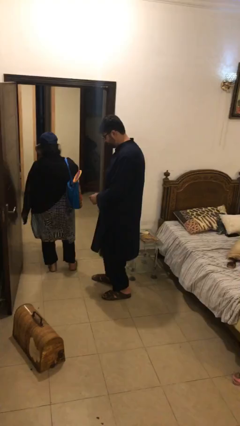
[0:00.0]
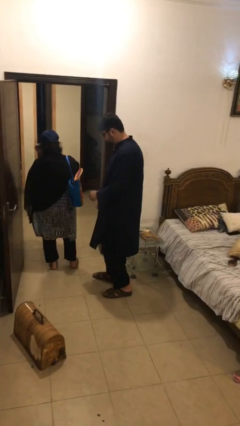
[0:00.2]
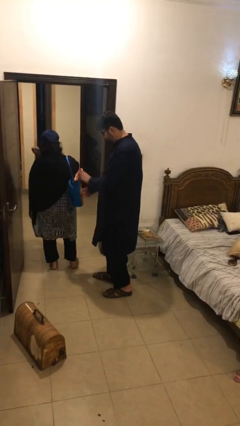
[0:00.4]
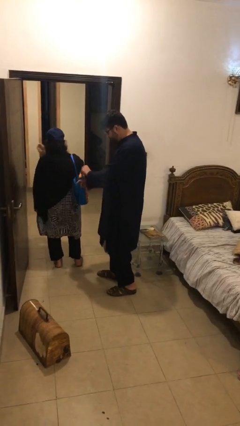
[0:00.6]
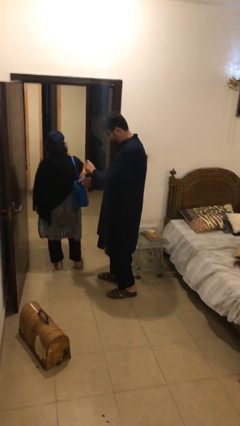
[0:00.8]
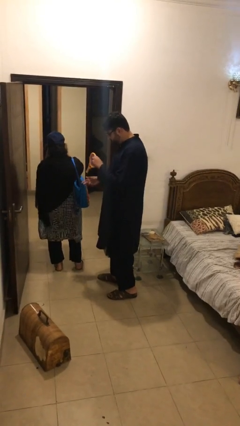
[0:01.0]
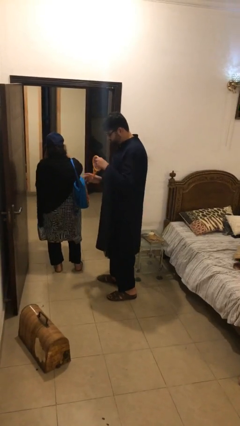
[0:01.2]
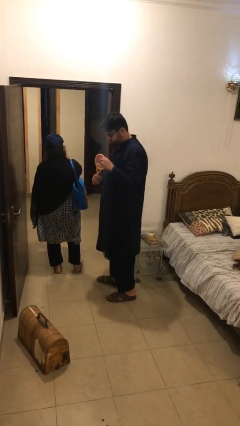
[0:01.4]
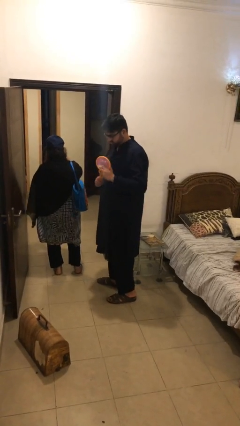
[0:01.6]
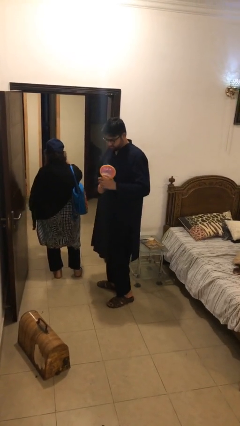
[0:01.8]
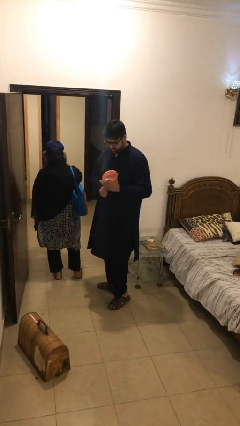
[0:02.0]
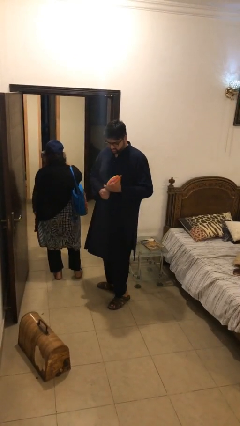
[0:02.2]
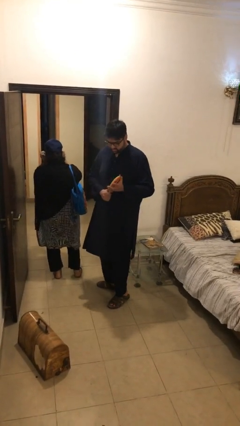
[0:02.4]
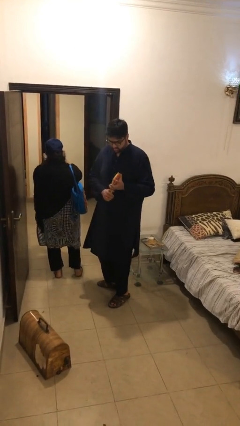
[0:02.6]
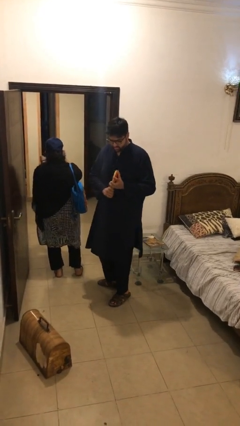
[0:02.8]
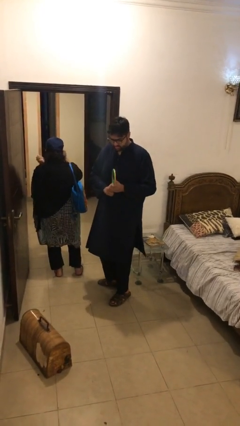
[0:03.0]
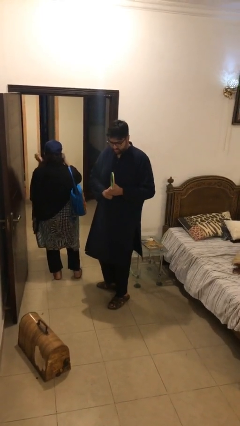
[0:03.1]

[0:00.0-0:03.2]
person steals object from person

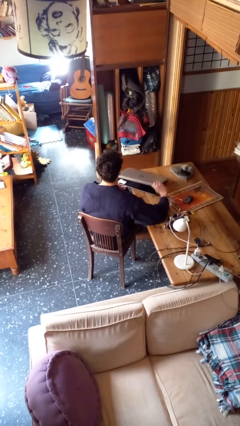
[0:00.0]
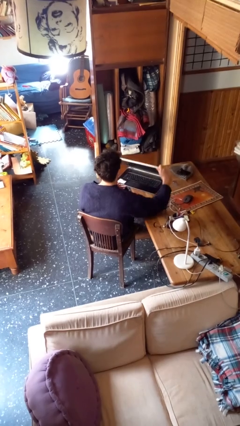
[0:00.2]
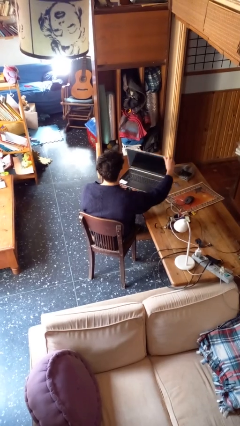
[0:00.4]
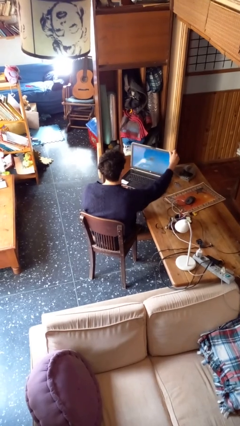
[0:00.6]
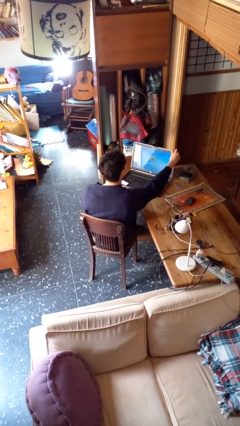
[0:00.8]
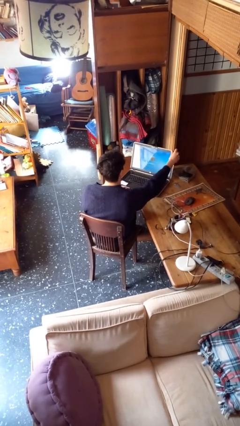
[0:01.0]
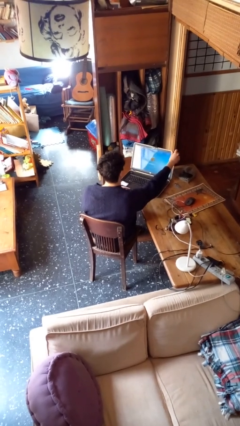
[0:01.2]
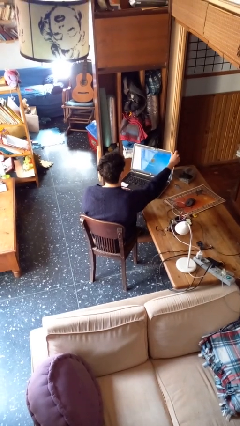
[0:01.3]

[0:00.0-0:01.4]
person opens laptop

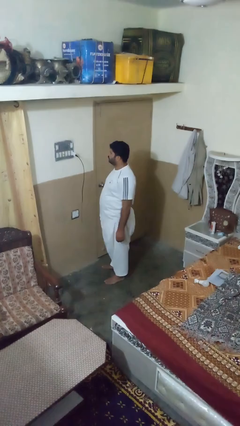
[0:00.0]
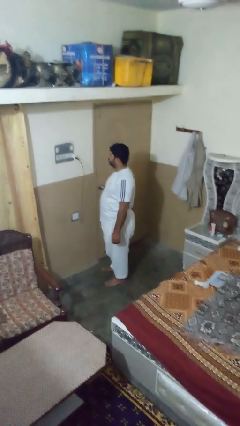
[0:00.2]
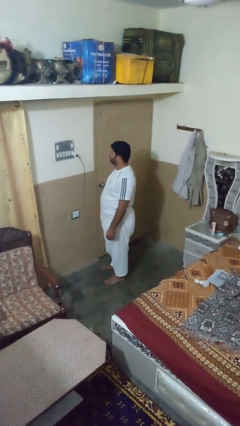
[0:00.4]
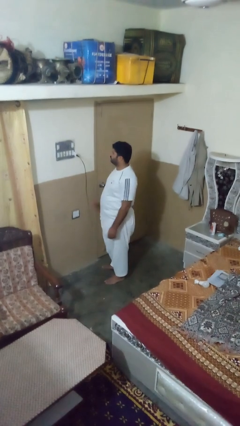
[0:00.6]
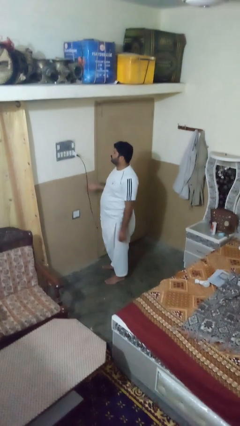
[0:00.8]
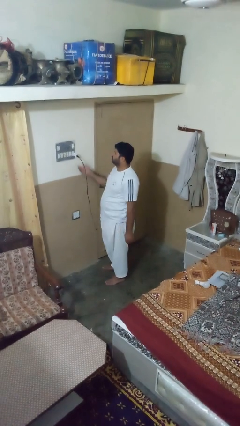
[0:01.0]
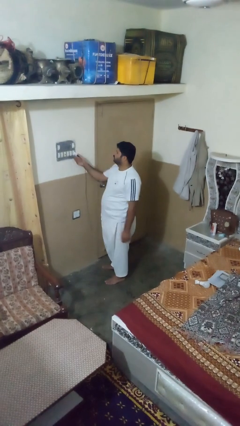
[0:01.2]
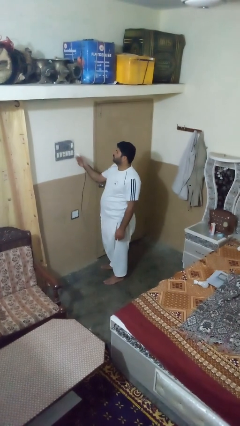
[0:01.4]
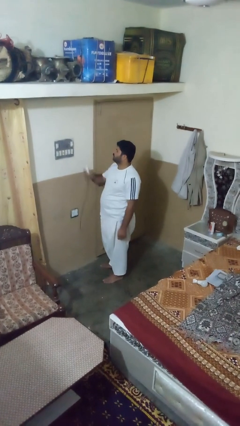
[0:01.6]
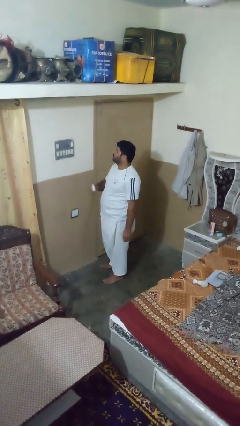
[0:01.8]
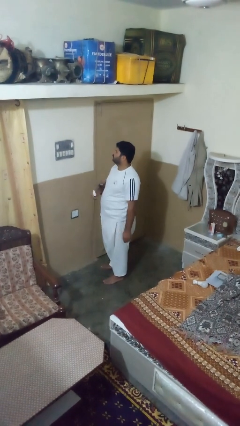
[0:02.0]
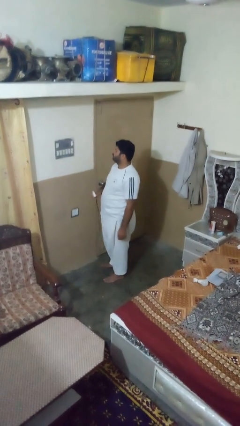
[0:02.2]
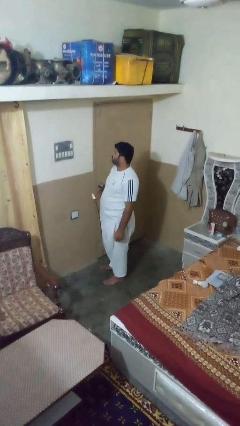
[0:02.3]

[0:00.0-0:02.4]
person unplugs from electrical socket

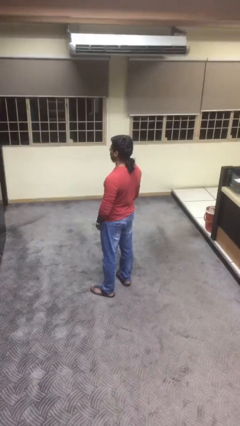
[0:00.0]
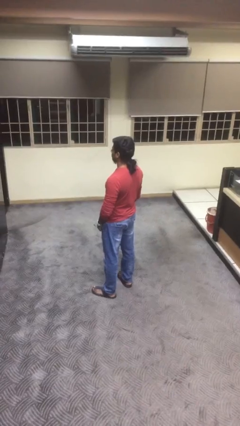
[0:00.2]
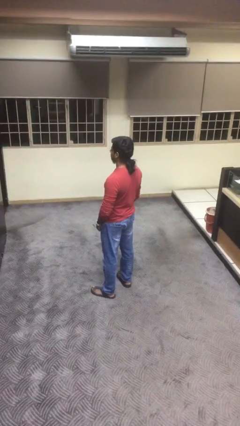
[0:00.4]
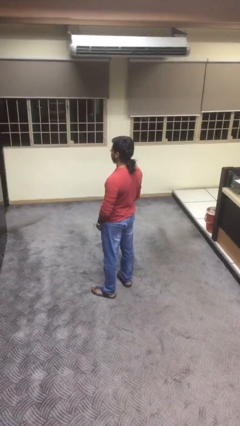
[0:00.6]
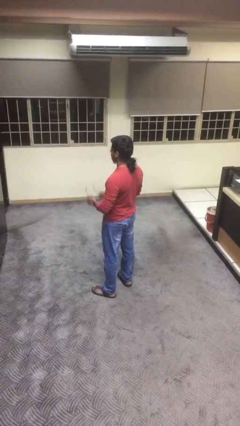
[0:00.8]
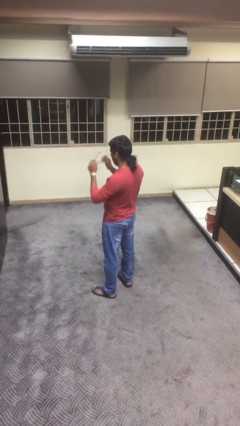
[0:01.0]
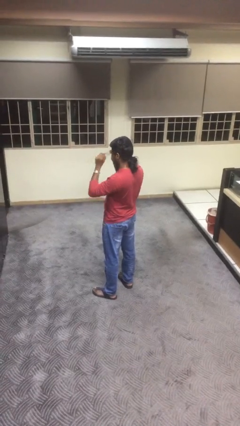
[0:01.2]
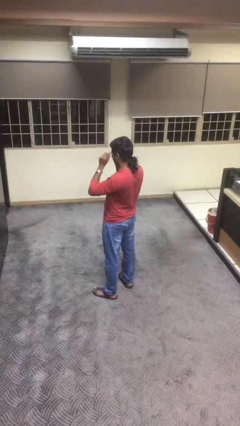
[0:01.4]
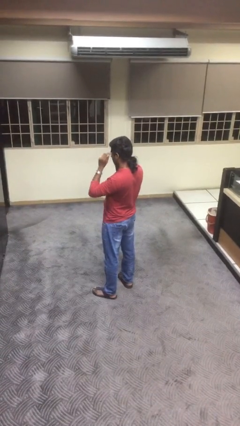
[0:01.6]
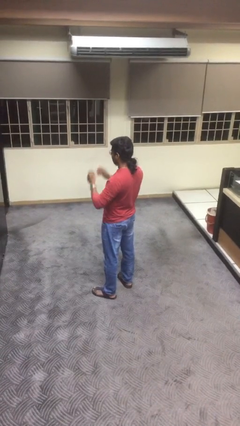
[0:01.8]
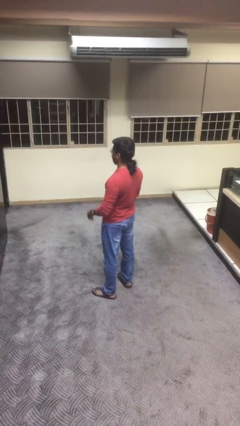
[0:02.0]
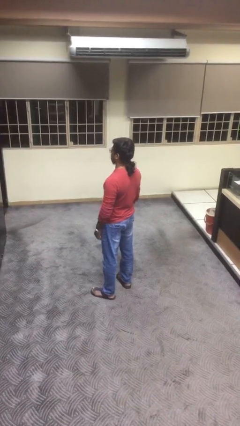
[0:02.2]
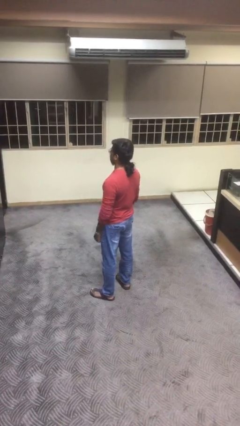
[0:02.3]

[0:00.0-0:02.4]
person puts on glasses

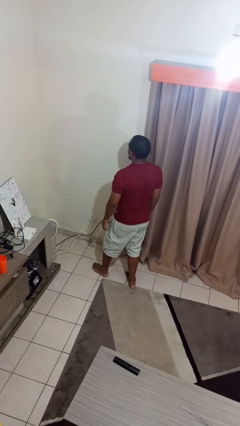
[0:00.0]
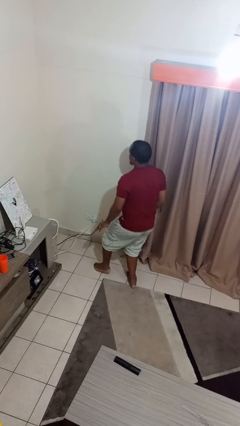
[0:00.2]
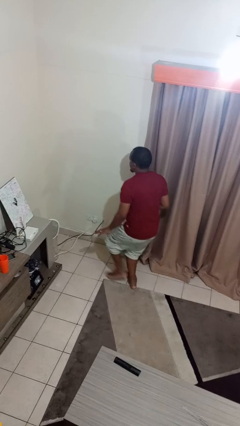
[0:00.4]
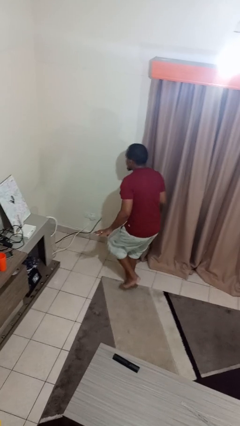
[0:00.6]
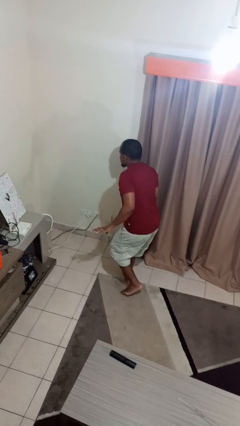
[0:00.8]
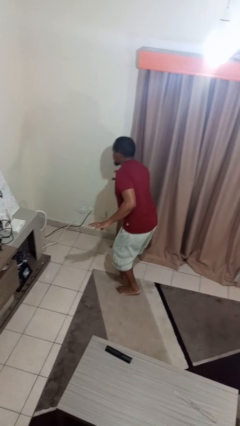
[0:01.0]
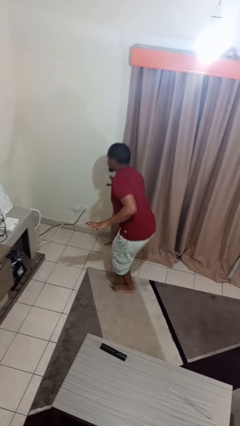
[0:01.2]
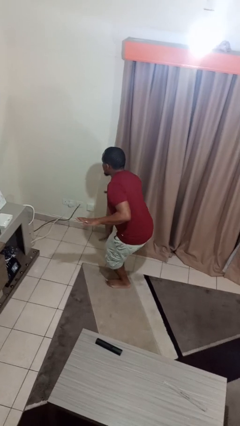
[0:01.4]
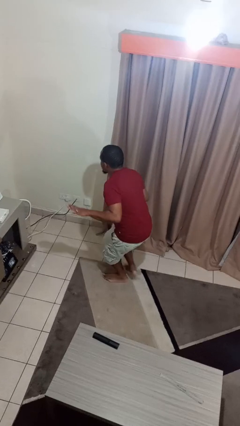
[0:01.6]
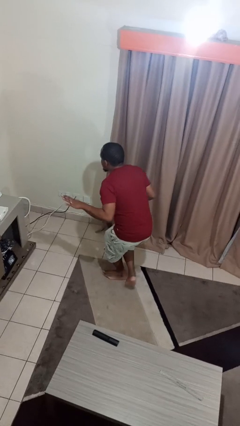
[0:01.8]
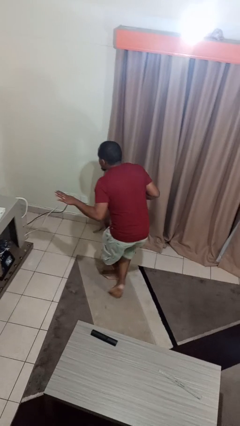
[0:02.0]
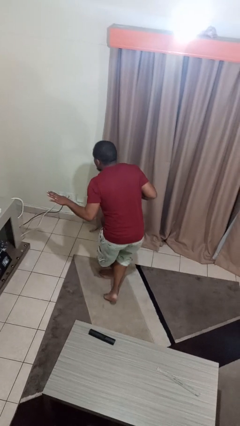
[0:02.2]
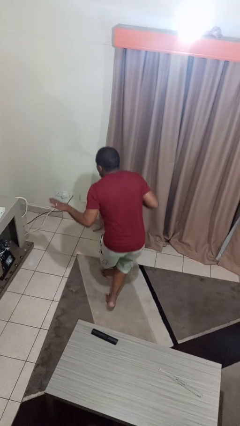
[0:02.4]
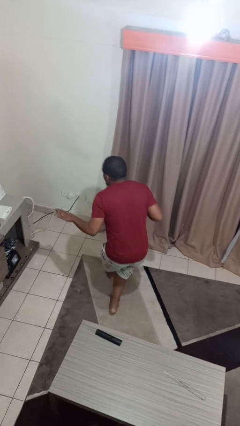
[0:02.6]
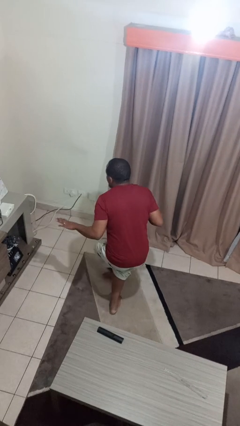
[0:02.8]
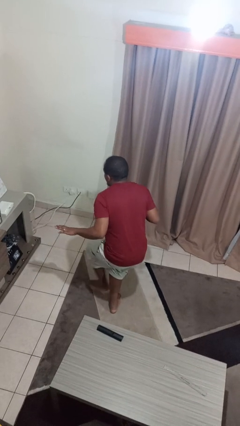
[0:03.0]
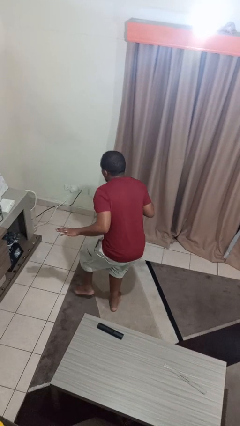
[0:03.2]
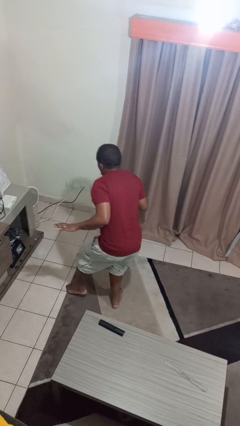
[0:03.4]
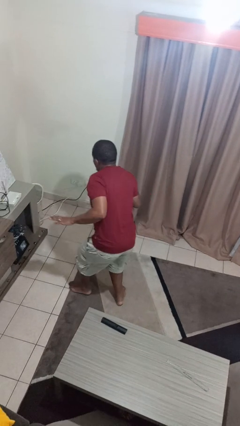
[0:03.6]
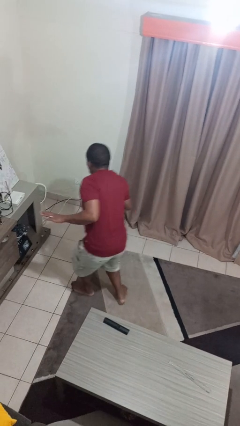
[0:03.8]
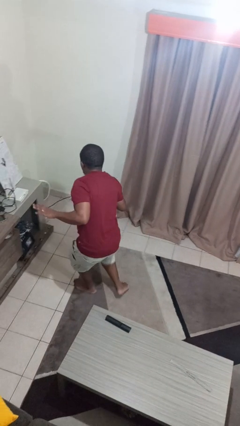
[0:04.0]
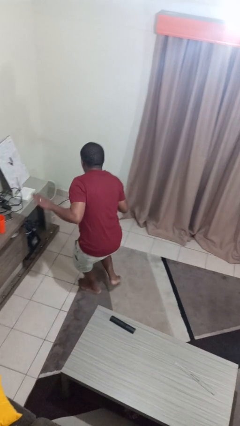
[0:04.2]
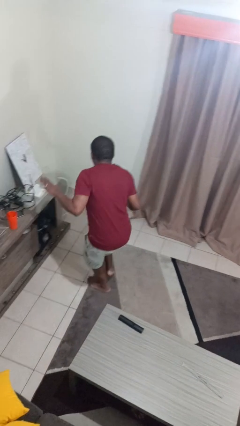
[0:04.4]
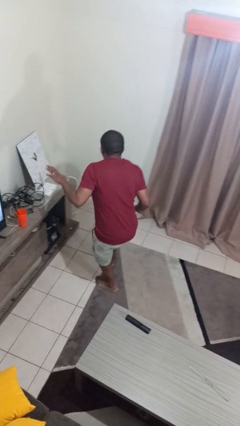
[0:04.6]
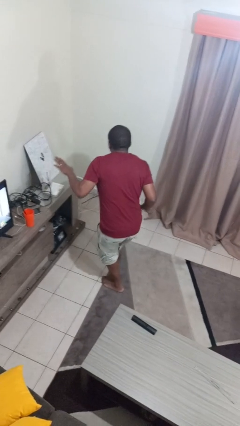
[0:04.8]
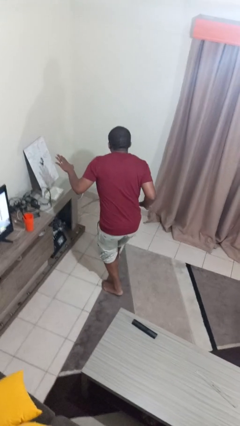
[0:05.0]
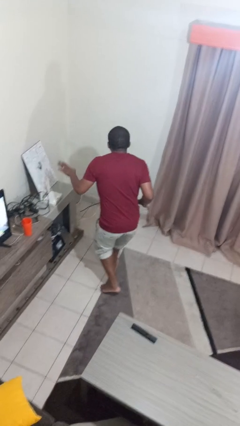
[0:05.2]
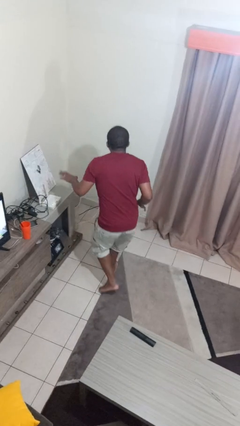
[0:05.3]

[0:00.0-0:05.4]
person walks tiptoe

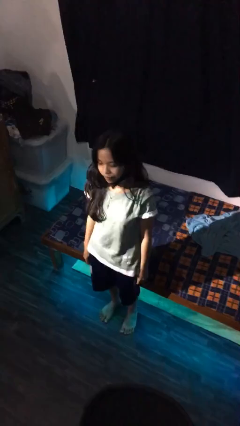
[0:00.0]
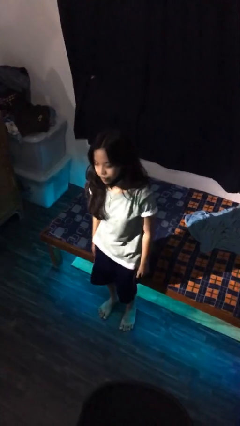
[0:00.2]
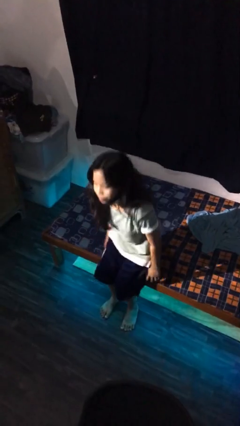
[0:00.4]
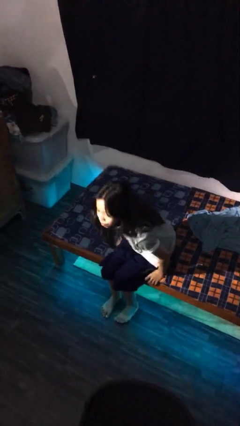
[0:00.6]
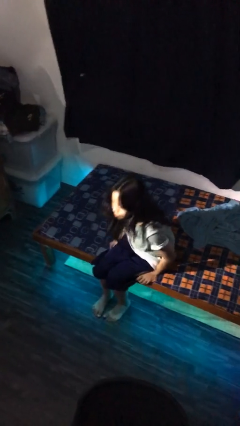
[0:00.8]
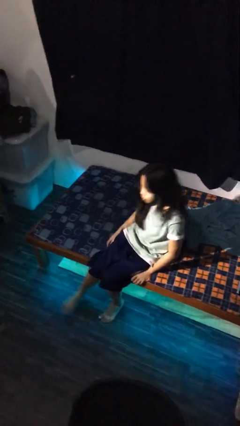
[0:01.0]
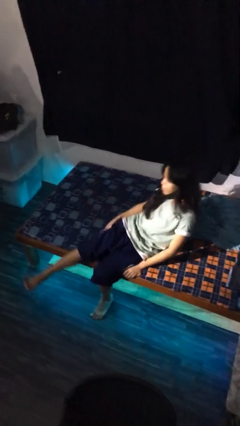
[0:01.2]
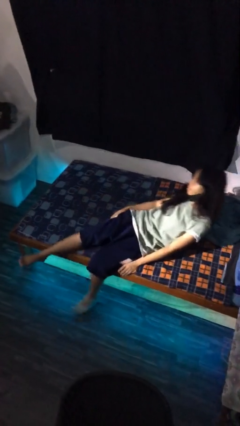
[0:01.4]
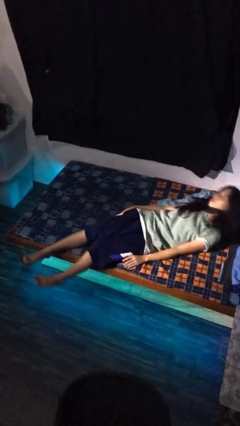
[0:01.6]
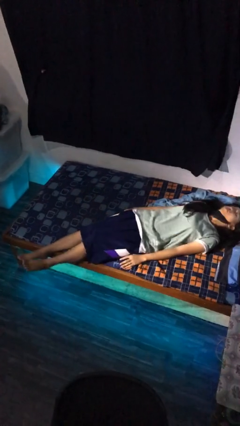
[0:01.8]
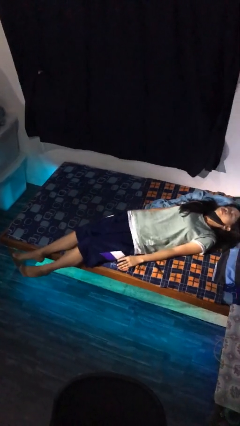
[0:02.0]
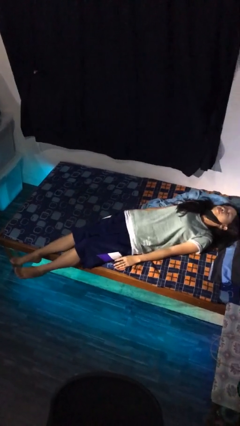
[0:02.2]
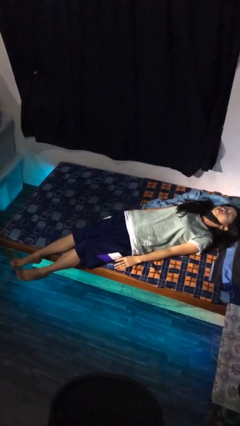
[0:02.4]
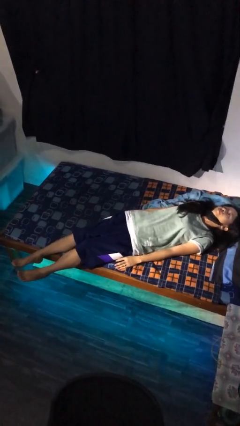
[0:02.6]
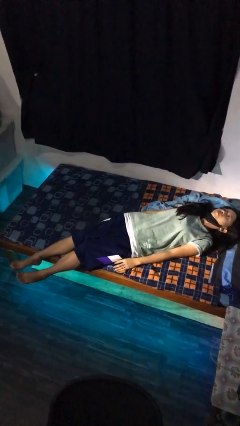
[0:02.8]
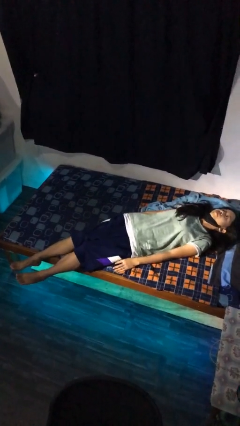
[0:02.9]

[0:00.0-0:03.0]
person lies down on bed
